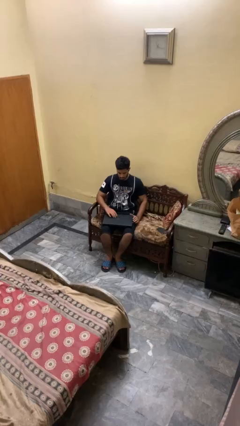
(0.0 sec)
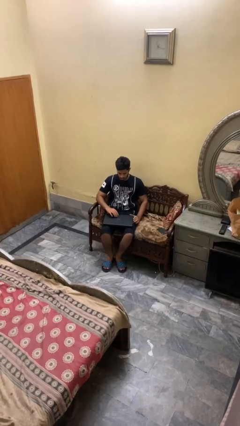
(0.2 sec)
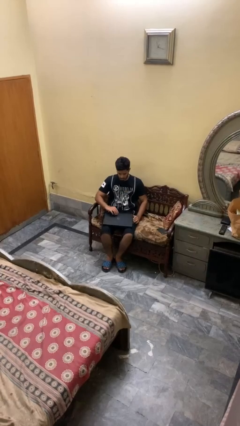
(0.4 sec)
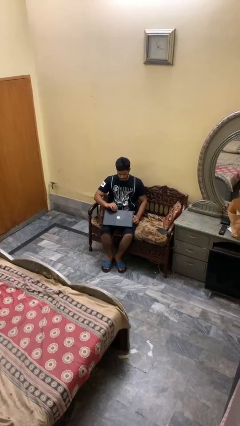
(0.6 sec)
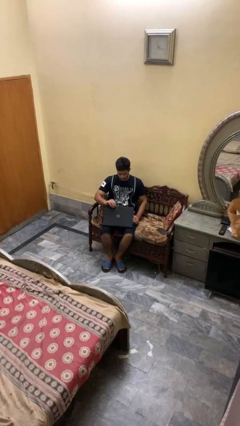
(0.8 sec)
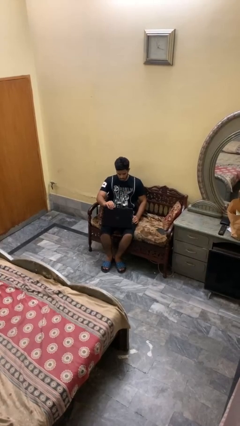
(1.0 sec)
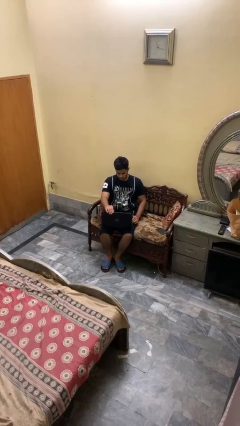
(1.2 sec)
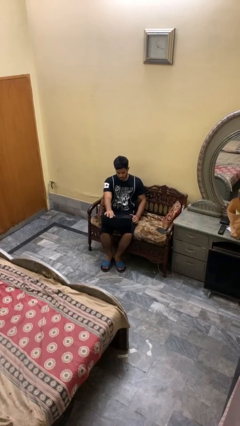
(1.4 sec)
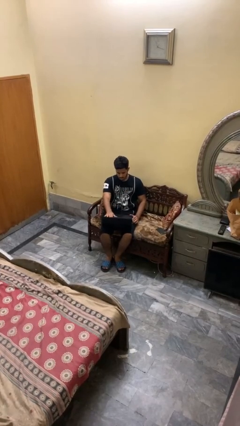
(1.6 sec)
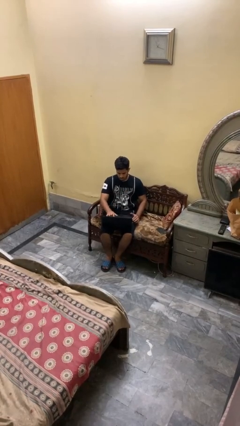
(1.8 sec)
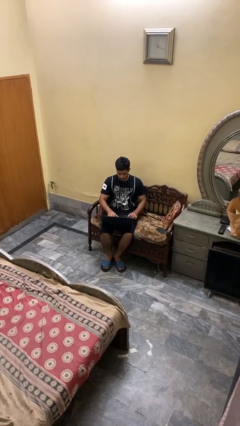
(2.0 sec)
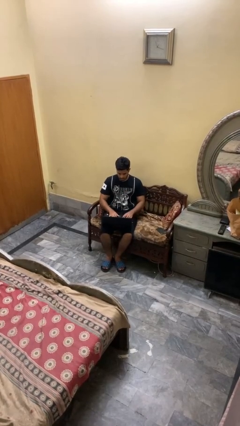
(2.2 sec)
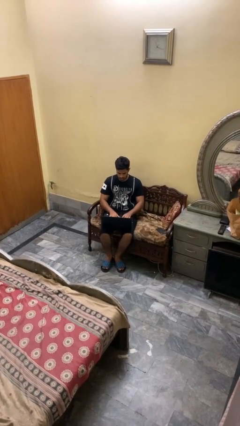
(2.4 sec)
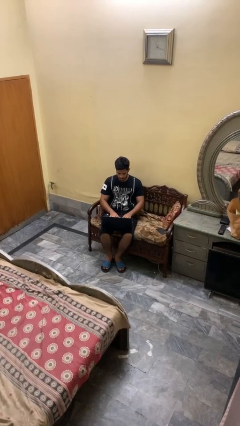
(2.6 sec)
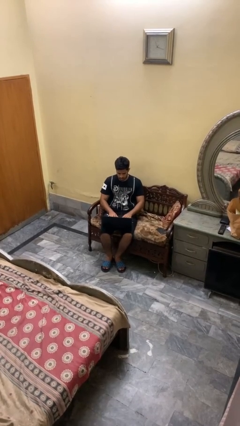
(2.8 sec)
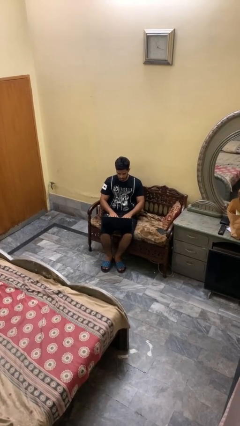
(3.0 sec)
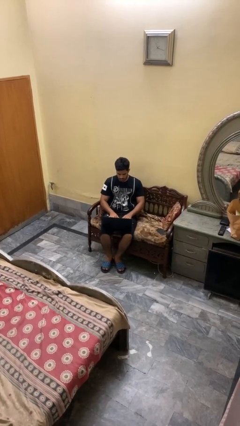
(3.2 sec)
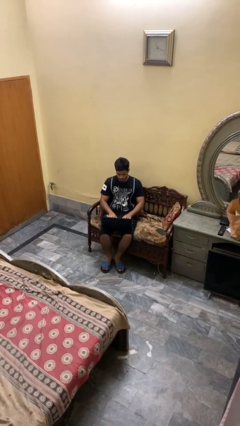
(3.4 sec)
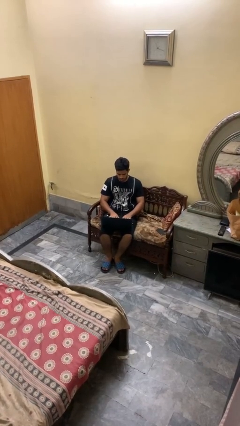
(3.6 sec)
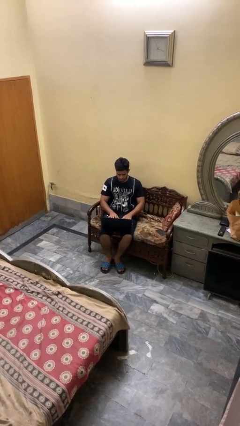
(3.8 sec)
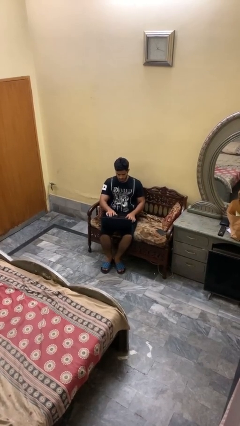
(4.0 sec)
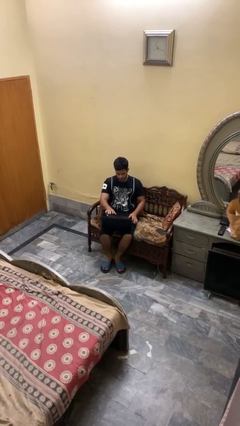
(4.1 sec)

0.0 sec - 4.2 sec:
person opens laptop

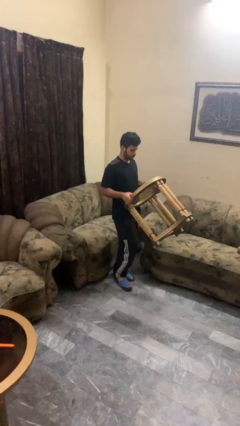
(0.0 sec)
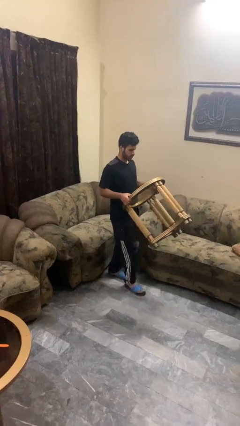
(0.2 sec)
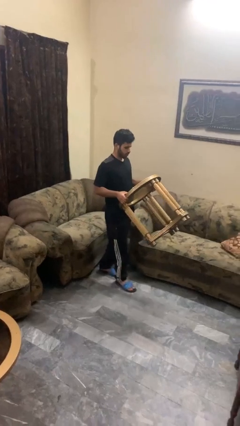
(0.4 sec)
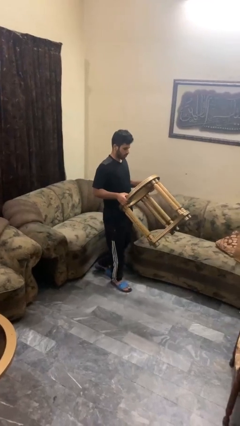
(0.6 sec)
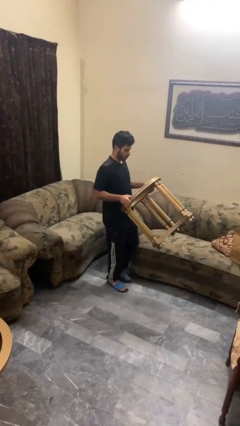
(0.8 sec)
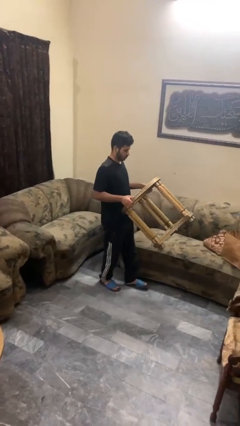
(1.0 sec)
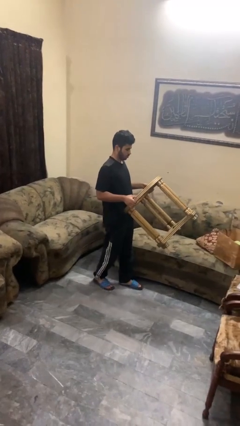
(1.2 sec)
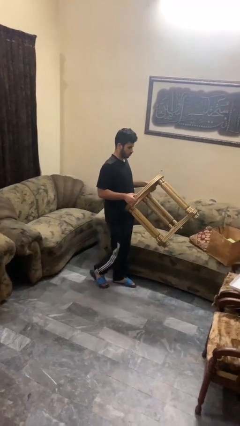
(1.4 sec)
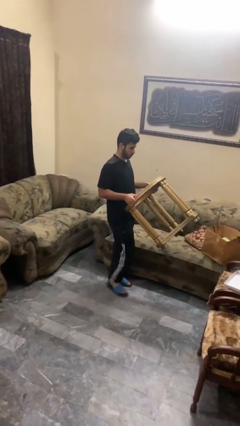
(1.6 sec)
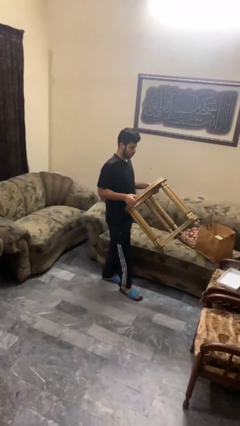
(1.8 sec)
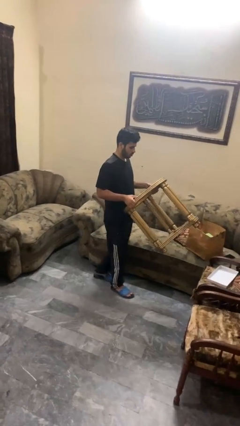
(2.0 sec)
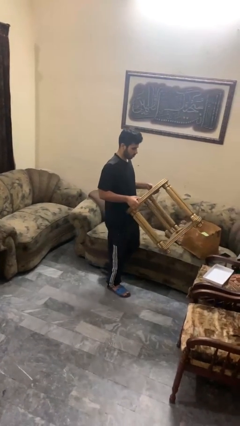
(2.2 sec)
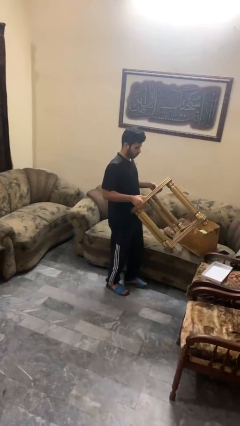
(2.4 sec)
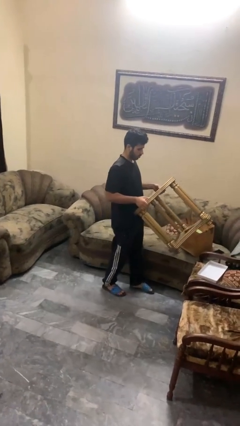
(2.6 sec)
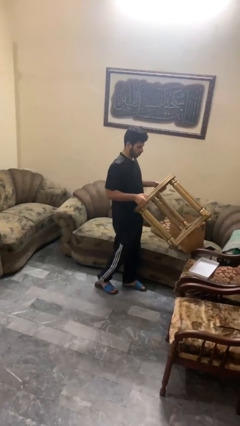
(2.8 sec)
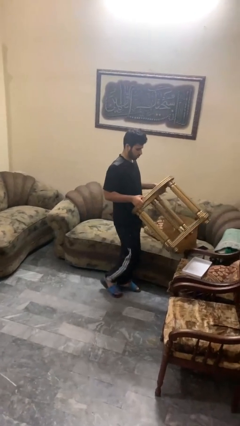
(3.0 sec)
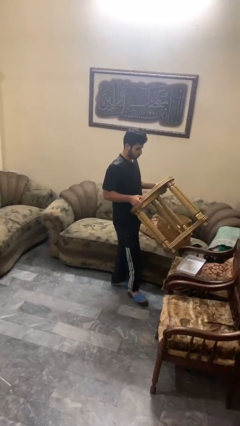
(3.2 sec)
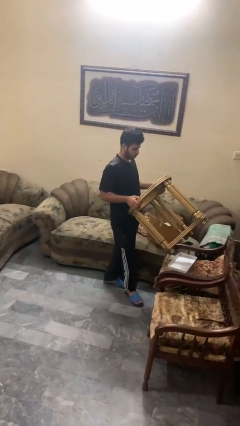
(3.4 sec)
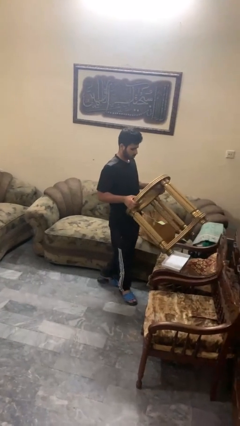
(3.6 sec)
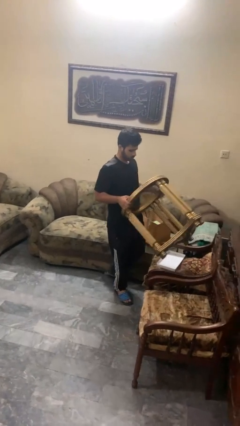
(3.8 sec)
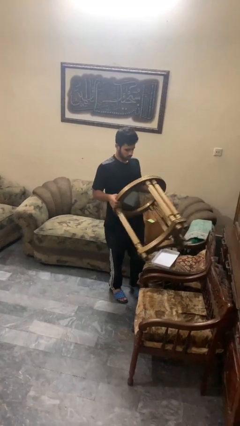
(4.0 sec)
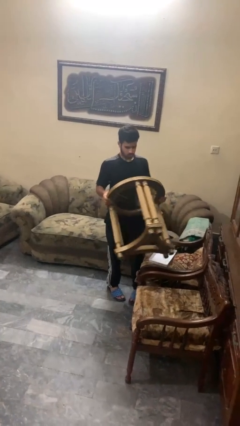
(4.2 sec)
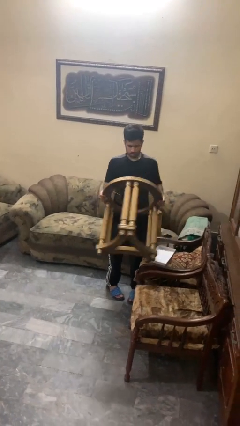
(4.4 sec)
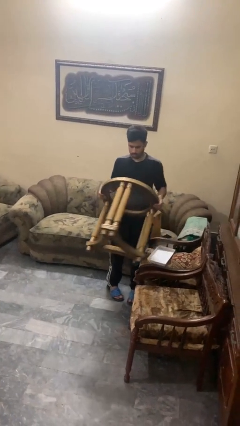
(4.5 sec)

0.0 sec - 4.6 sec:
person carries furniture

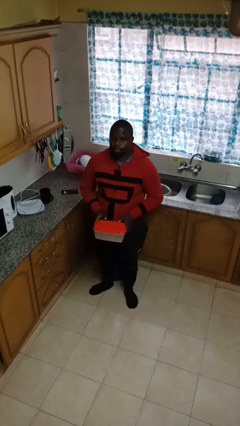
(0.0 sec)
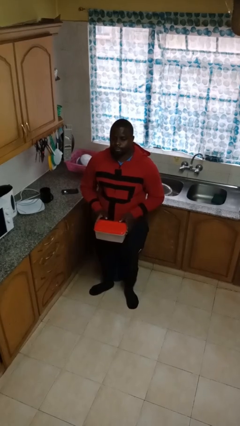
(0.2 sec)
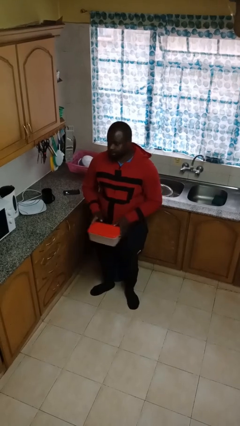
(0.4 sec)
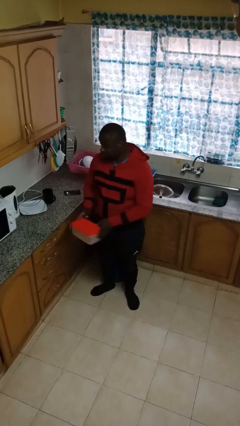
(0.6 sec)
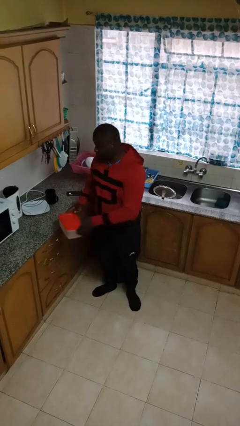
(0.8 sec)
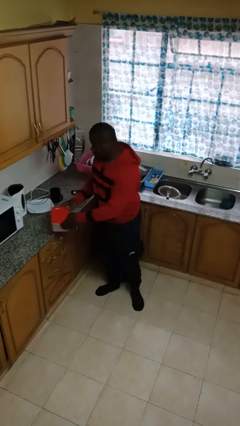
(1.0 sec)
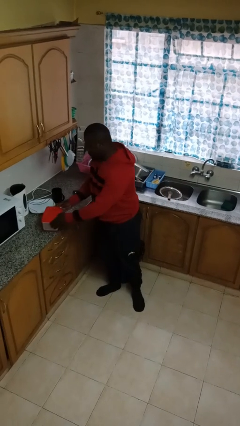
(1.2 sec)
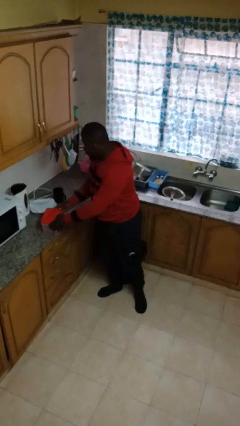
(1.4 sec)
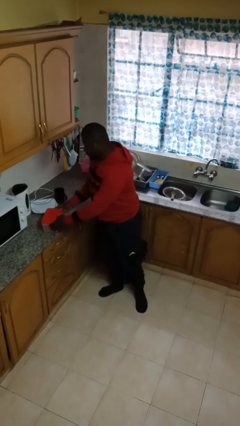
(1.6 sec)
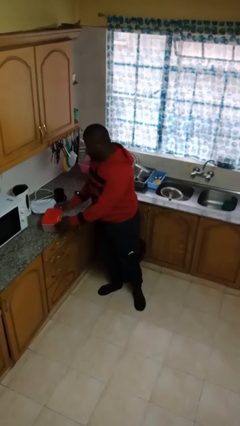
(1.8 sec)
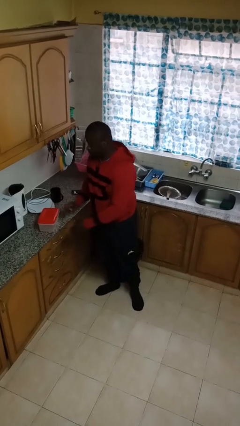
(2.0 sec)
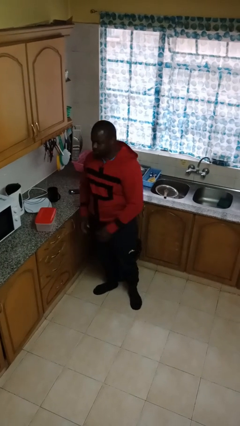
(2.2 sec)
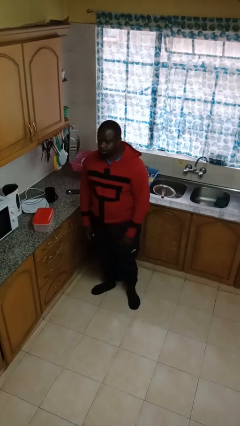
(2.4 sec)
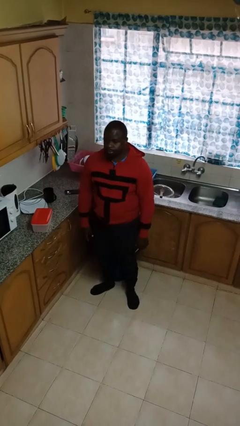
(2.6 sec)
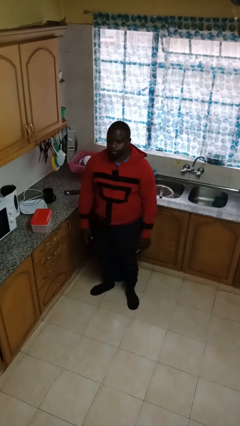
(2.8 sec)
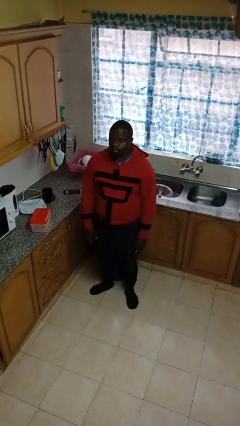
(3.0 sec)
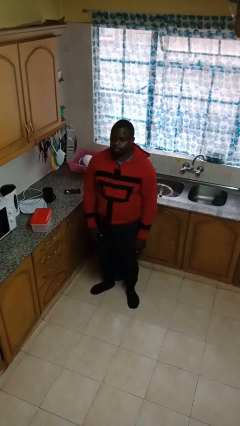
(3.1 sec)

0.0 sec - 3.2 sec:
person puts down object on countertop

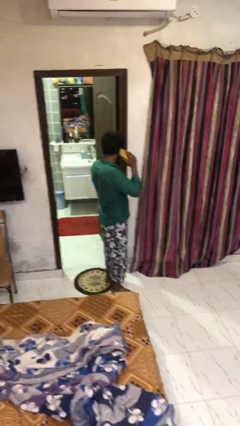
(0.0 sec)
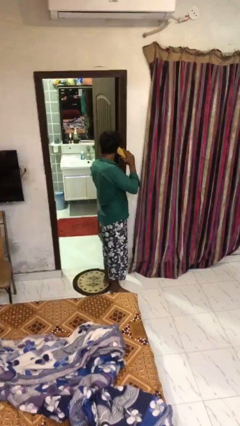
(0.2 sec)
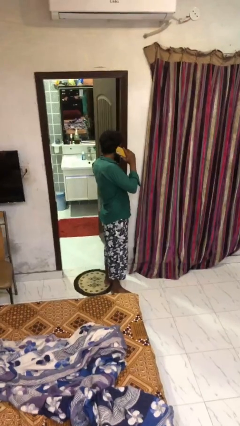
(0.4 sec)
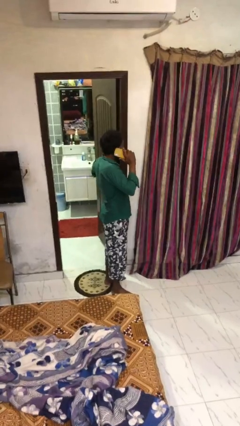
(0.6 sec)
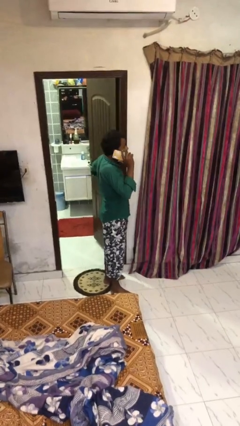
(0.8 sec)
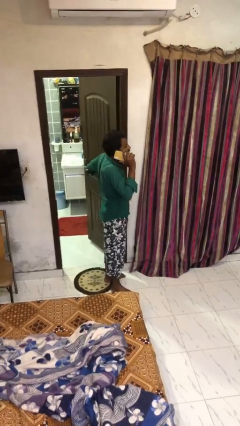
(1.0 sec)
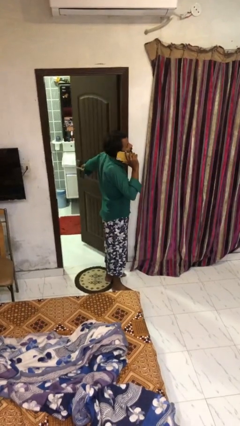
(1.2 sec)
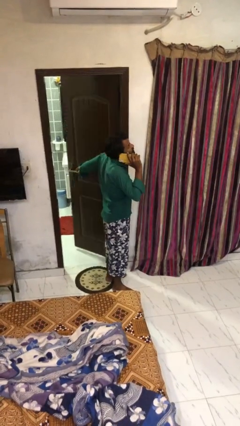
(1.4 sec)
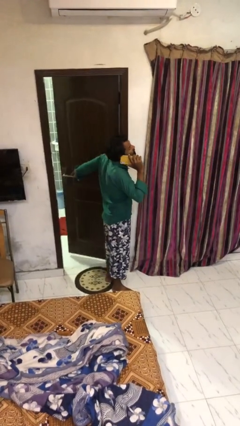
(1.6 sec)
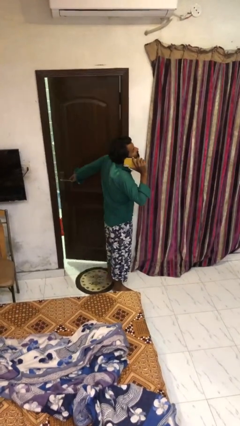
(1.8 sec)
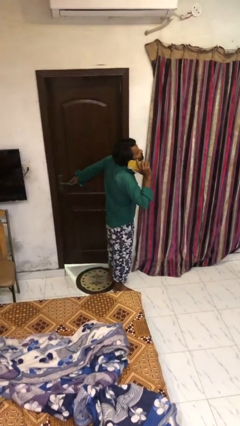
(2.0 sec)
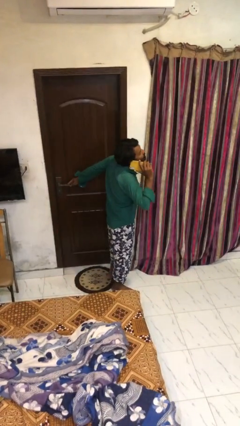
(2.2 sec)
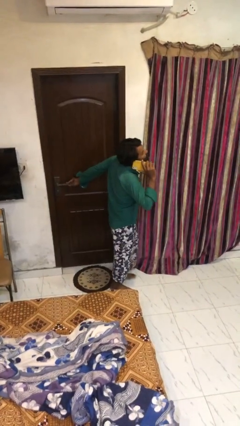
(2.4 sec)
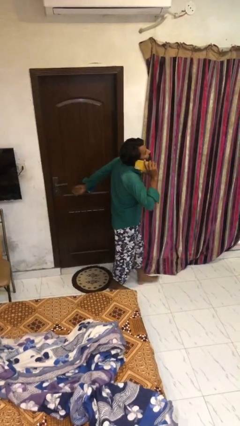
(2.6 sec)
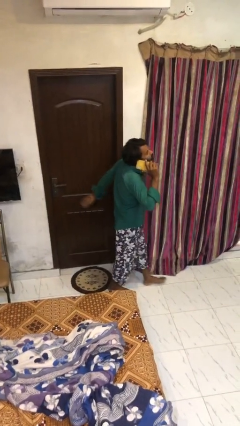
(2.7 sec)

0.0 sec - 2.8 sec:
person closes facility door

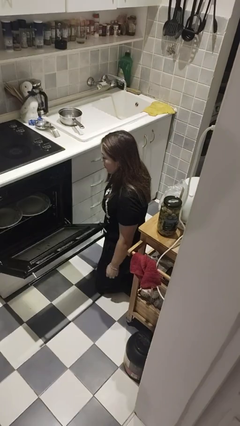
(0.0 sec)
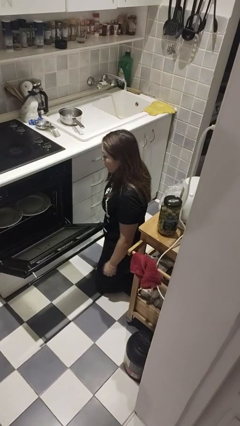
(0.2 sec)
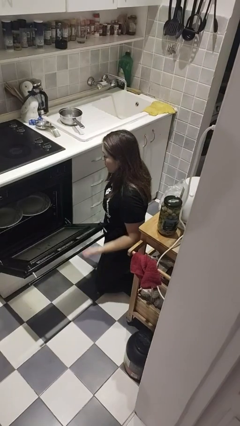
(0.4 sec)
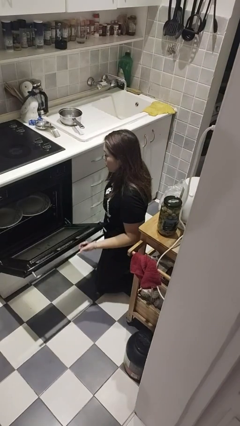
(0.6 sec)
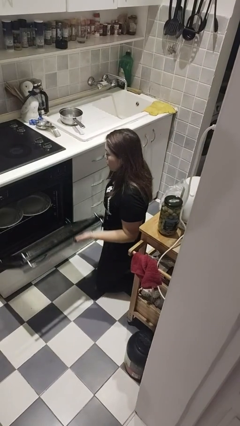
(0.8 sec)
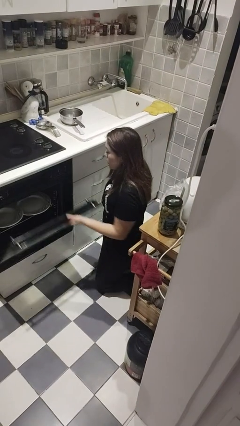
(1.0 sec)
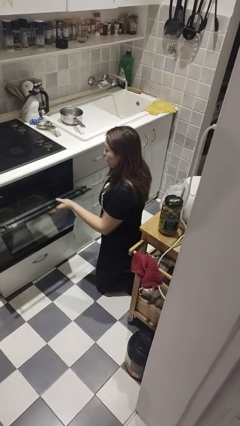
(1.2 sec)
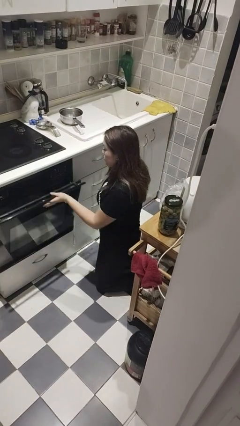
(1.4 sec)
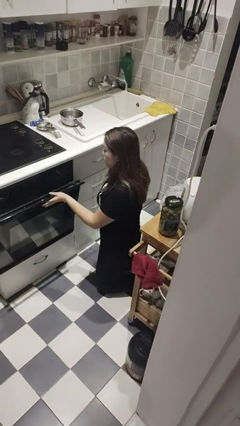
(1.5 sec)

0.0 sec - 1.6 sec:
person closes dishwasher

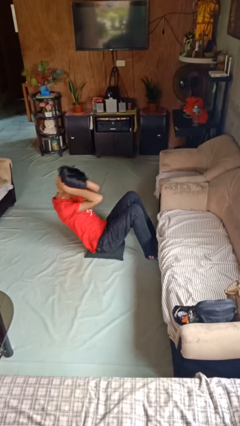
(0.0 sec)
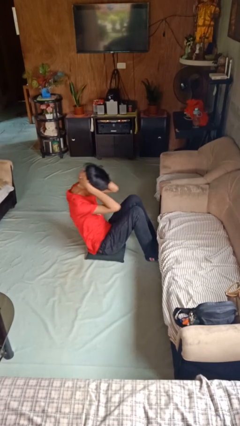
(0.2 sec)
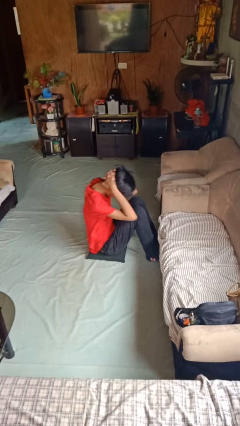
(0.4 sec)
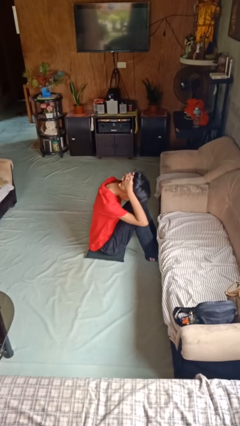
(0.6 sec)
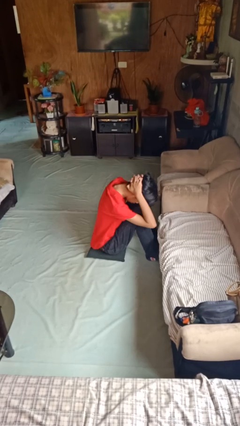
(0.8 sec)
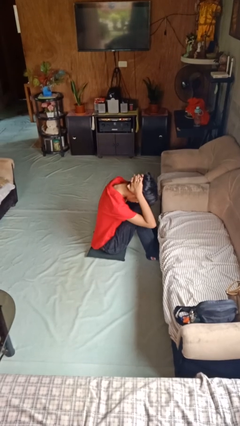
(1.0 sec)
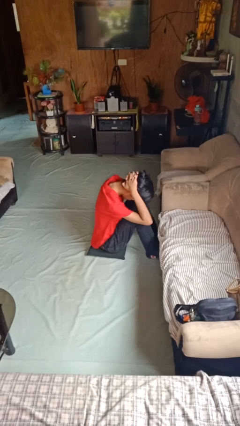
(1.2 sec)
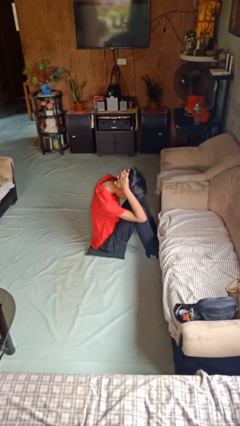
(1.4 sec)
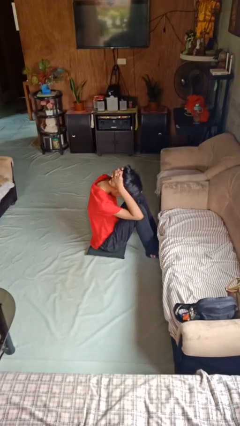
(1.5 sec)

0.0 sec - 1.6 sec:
person exercises with situp
